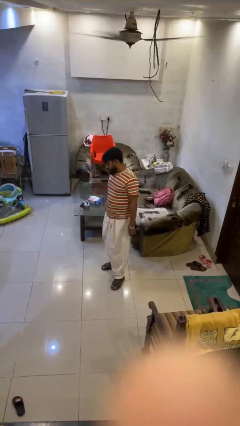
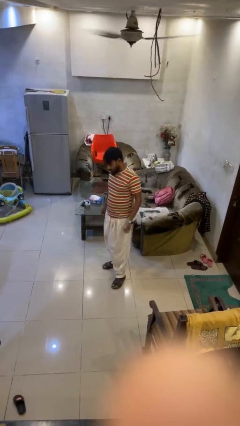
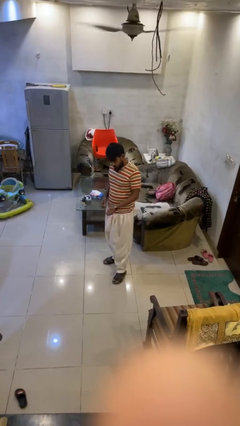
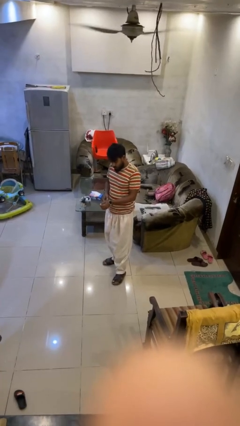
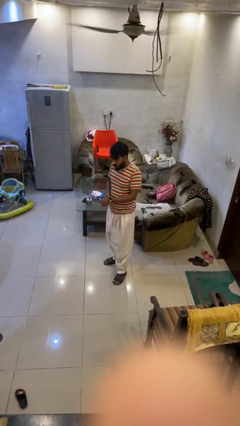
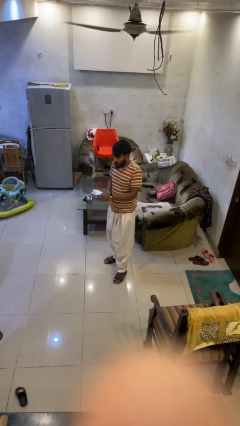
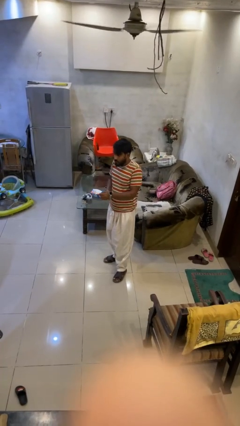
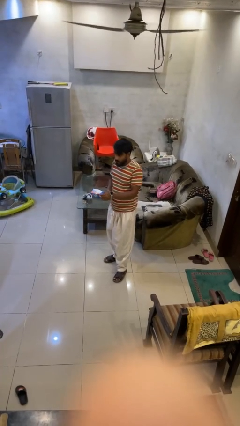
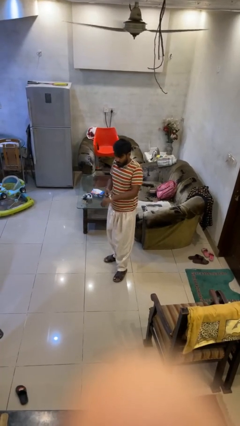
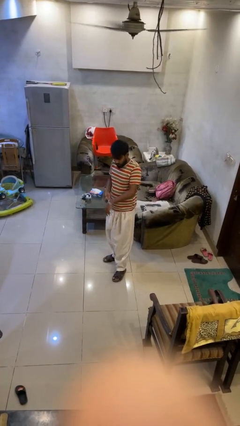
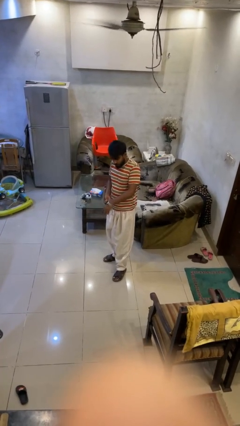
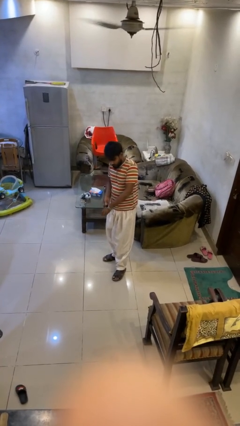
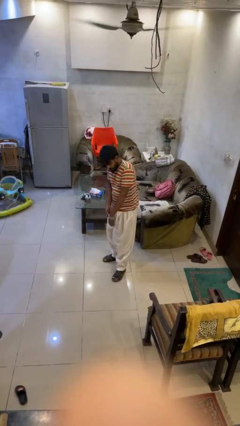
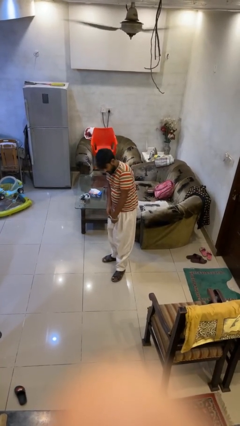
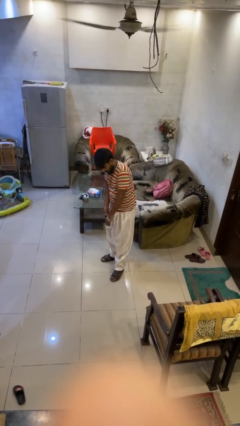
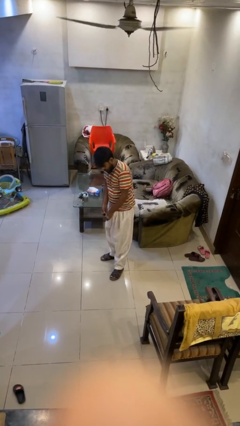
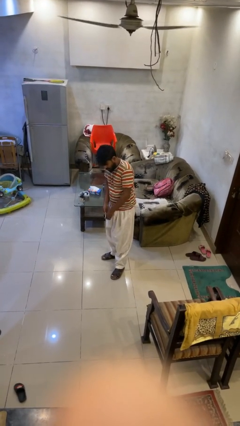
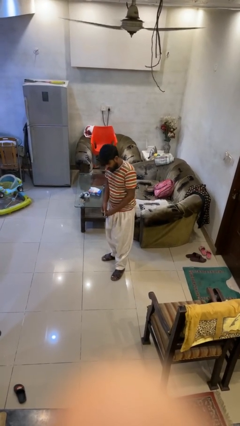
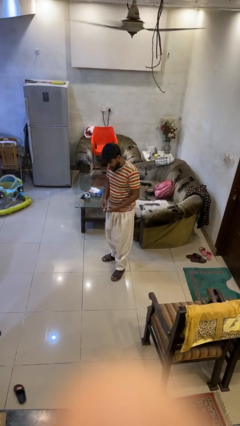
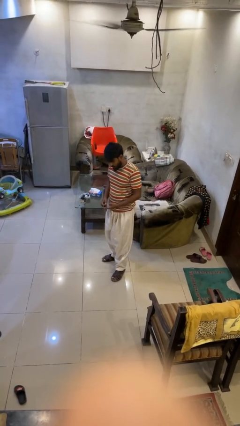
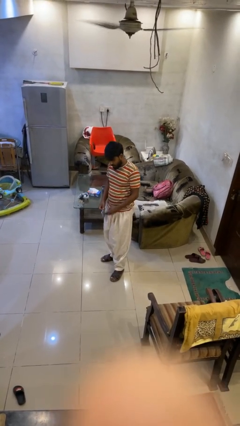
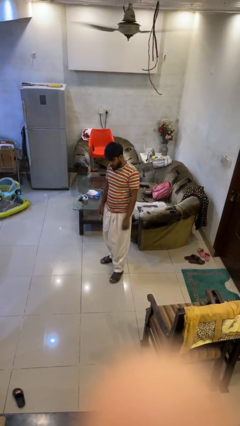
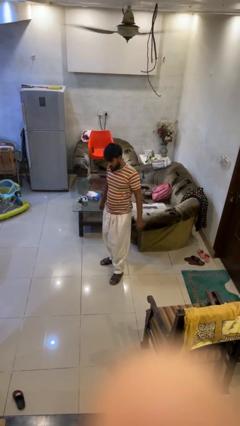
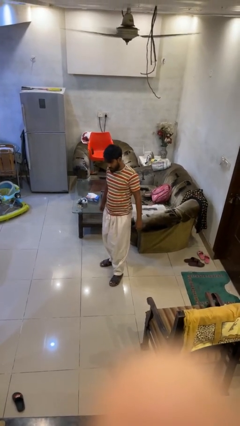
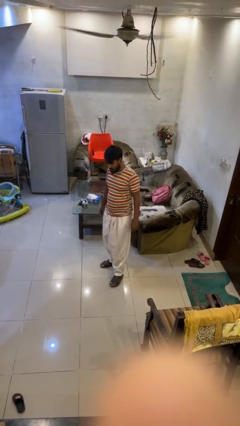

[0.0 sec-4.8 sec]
person takes off wristwatch

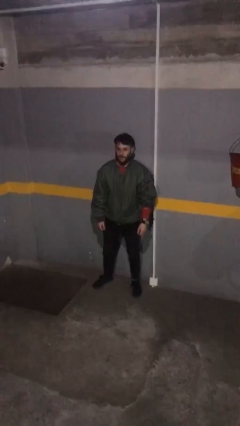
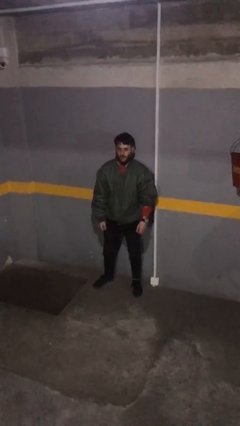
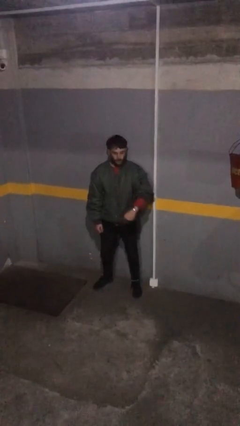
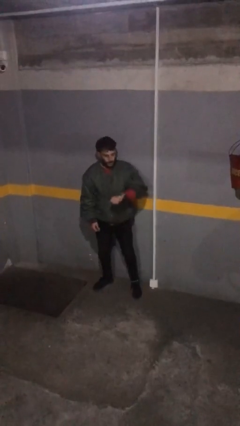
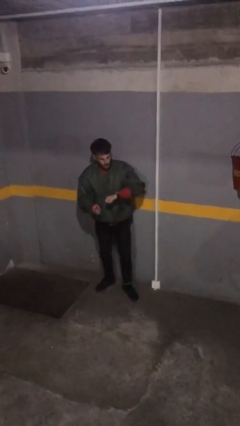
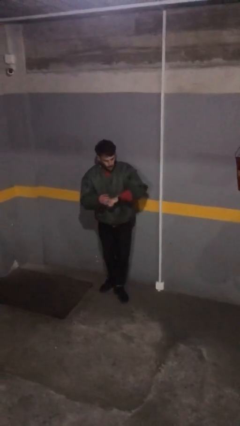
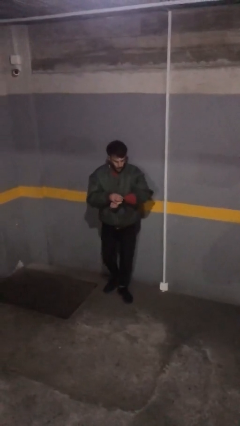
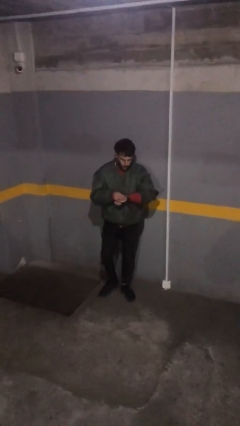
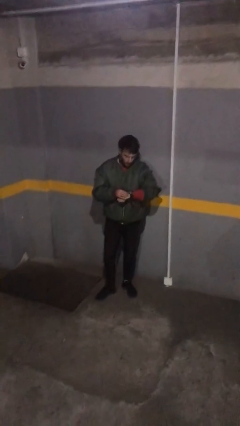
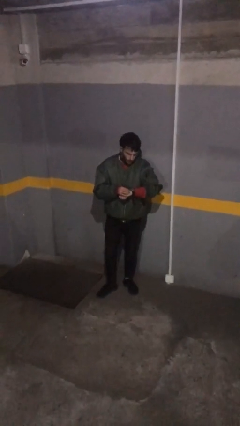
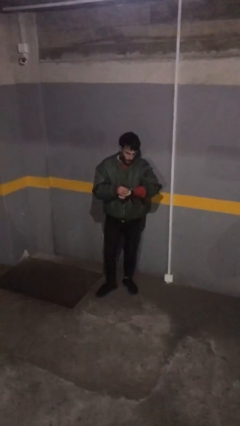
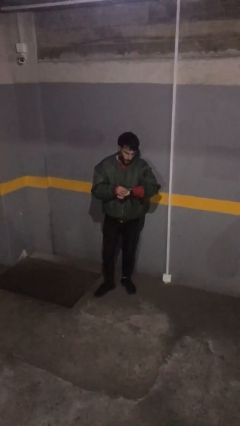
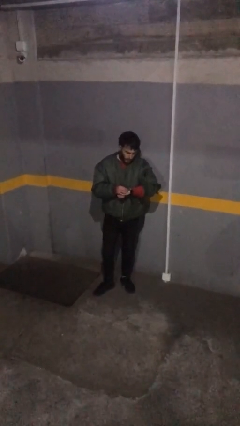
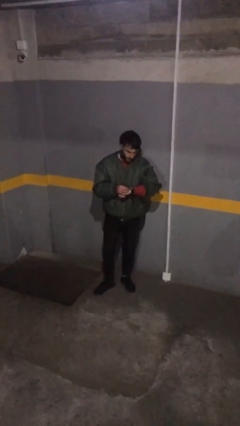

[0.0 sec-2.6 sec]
person looks at wristwatch

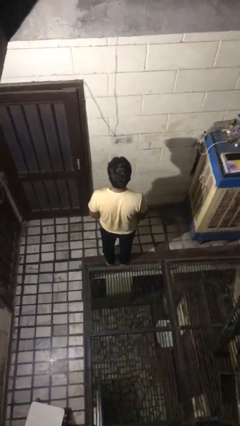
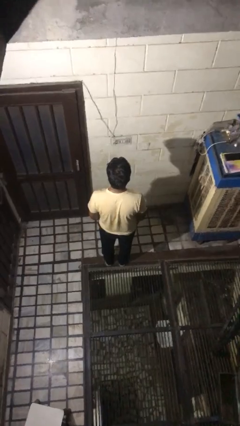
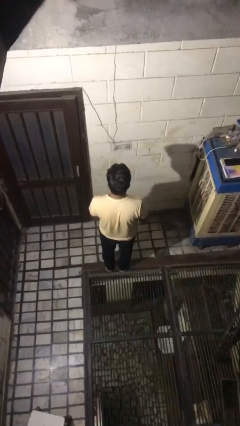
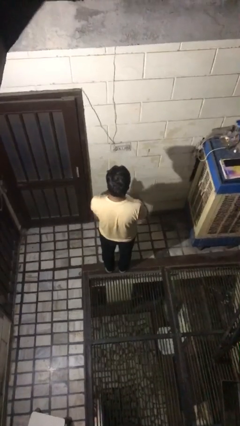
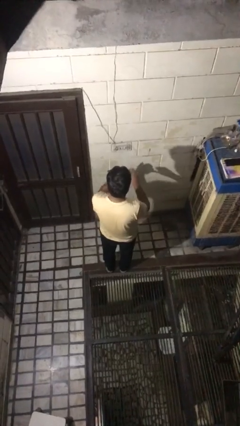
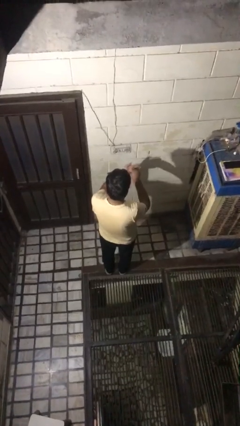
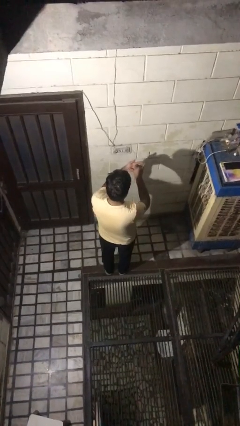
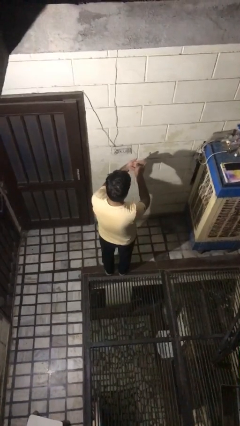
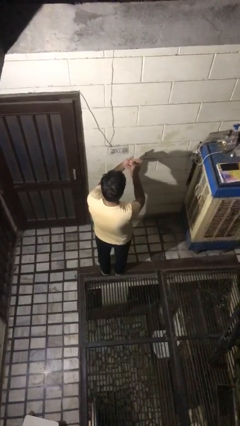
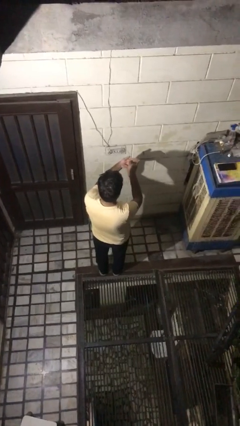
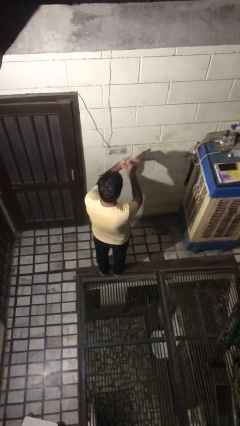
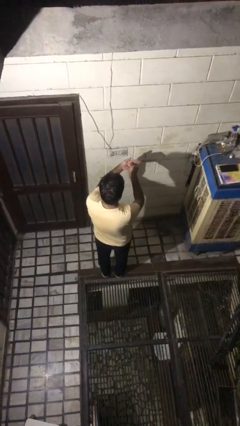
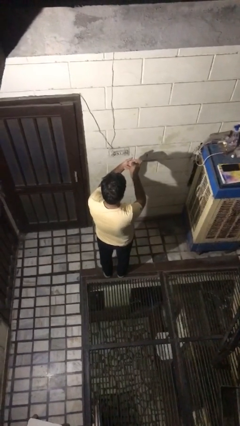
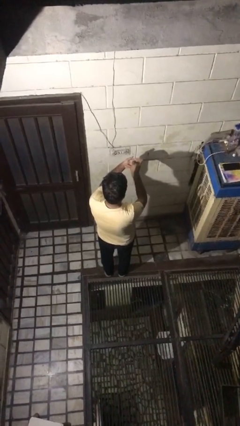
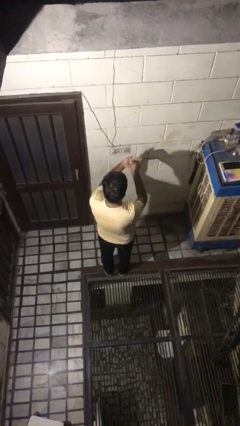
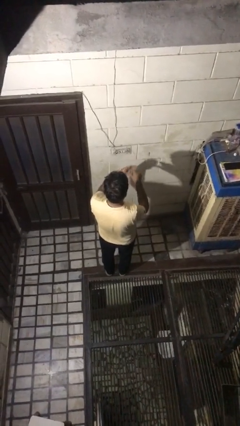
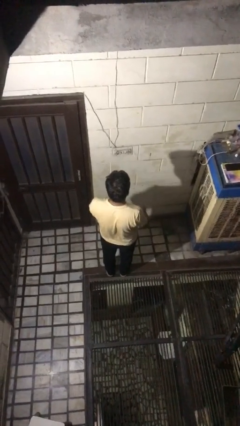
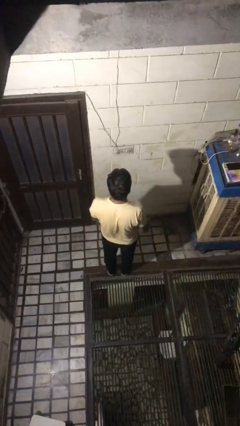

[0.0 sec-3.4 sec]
person gestures hang loose

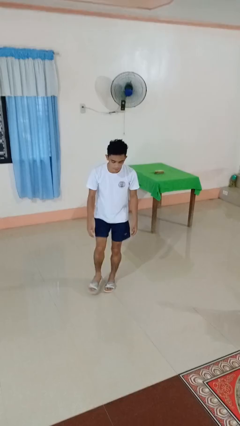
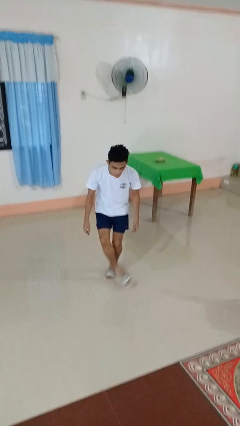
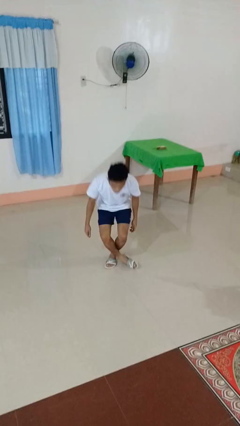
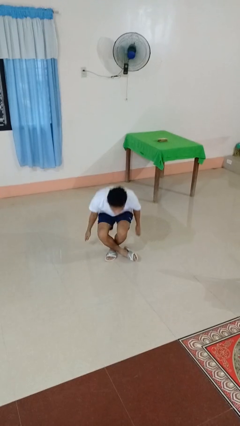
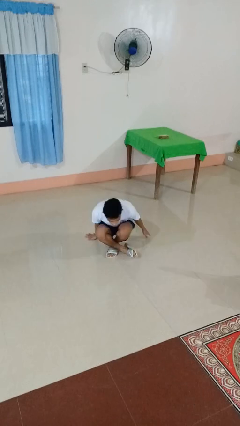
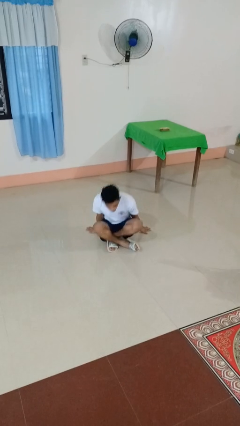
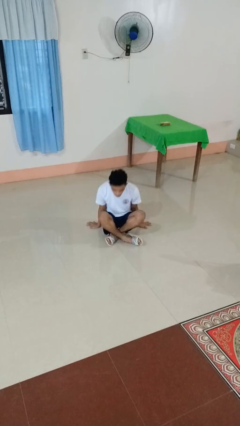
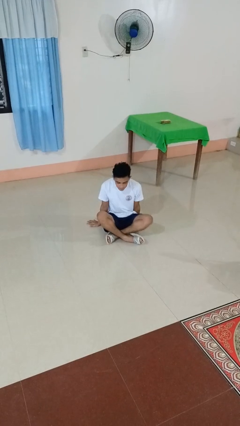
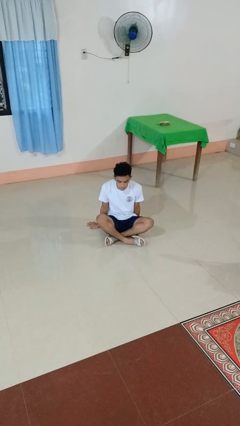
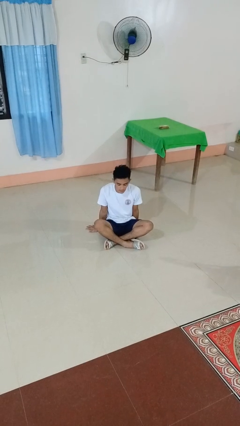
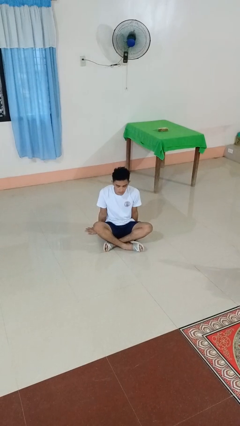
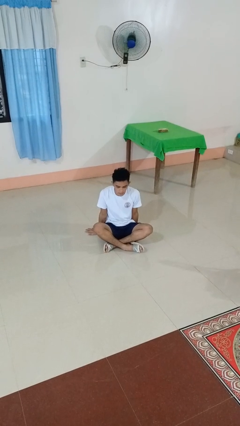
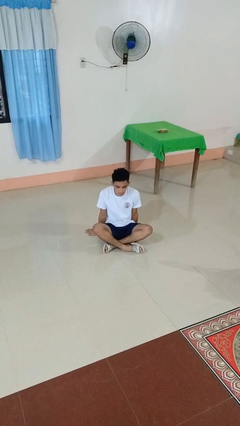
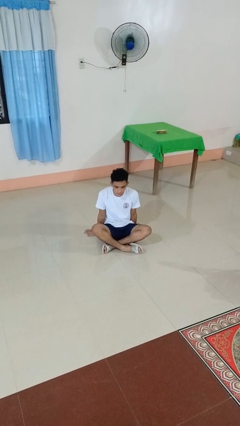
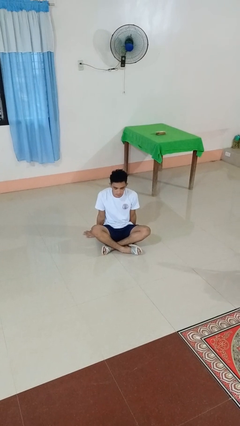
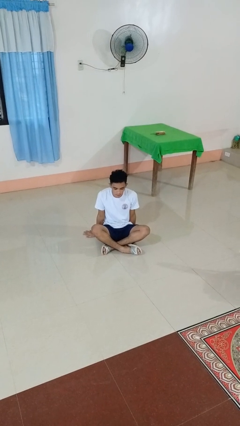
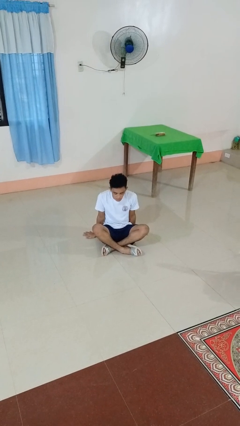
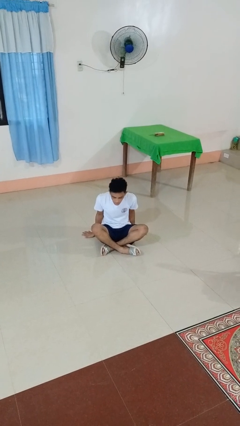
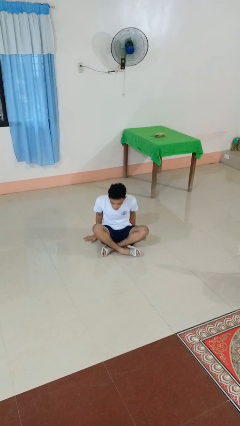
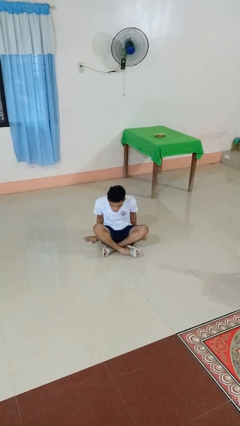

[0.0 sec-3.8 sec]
person sits crisscross

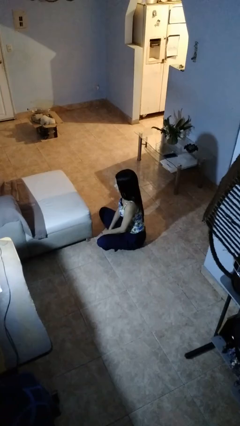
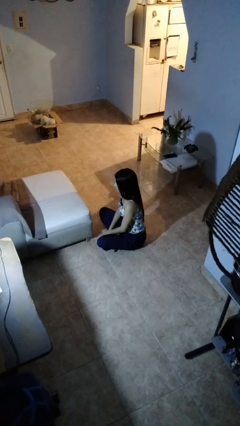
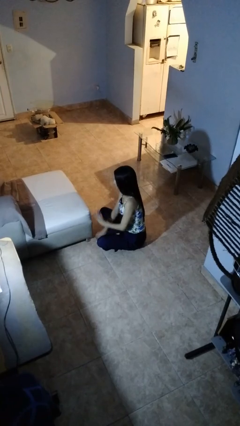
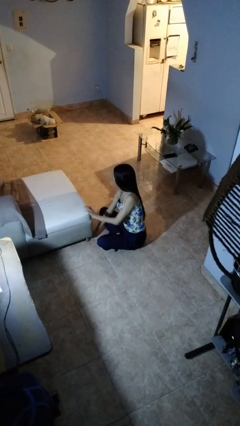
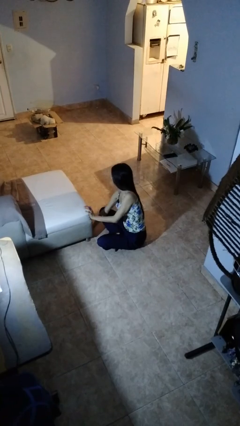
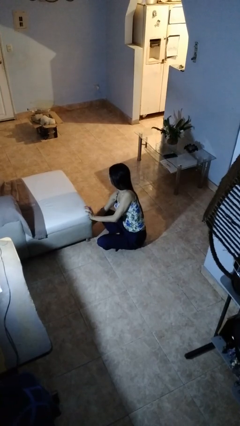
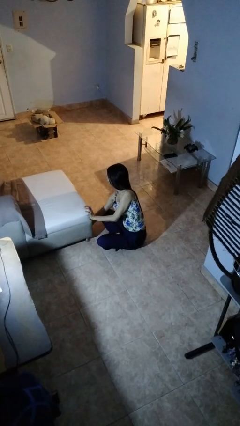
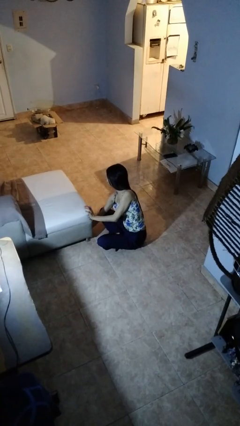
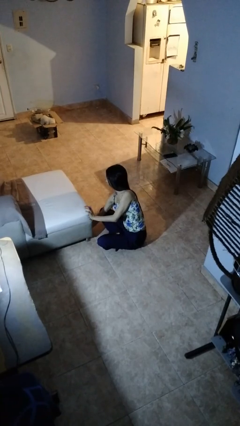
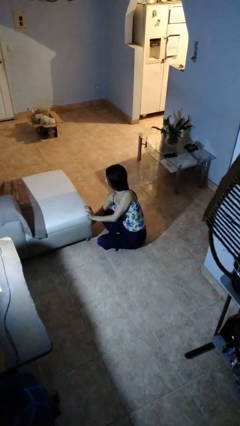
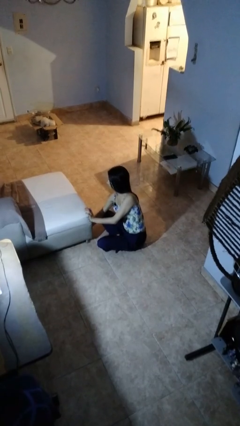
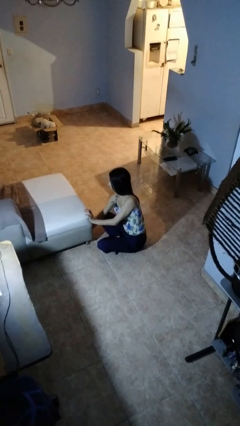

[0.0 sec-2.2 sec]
person searches under couch

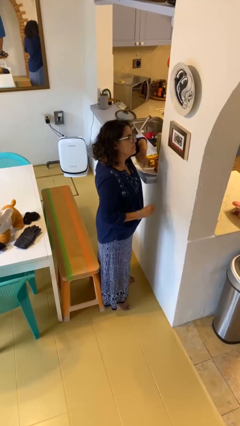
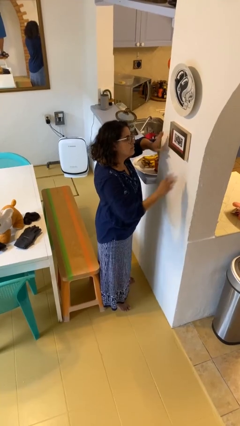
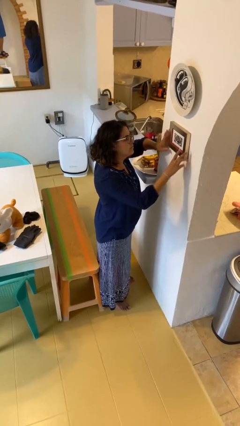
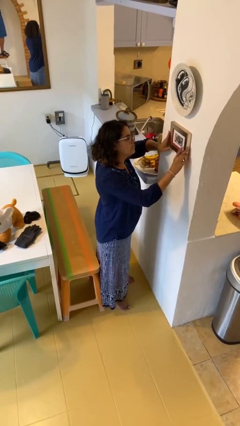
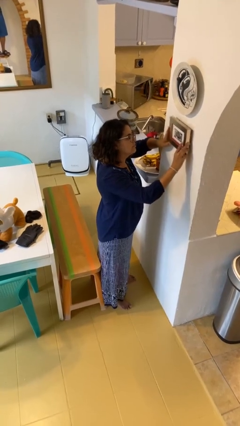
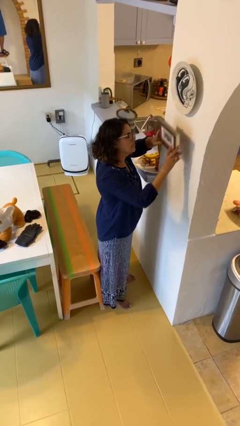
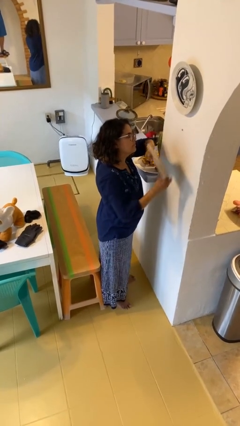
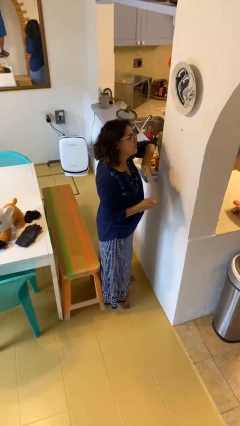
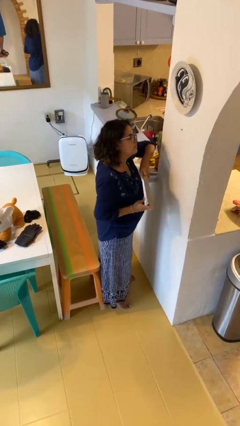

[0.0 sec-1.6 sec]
person takes down picture frame
